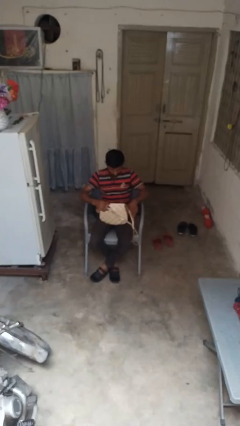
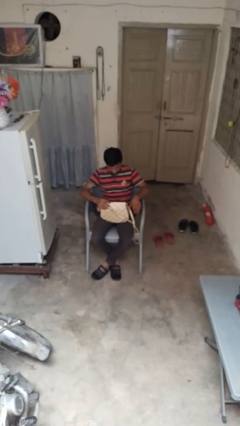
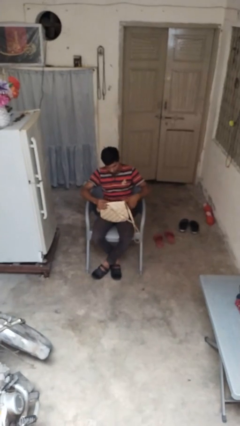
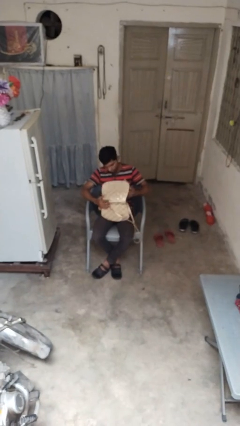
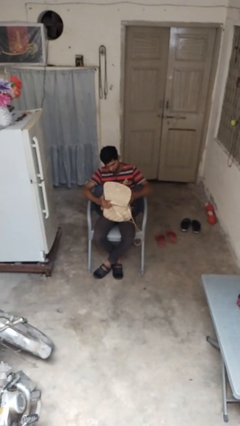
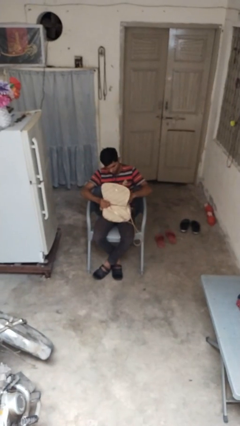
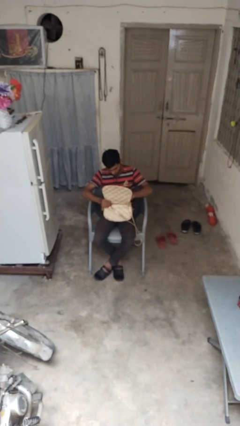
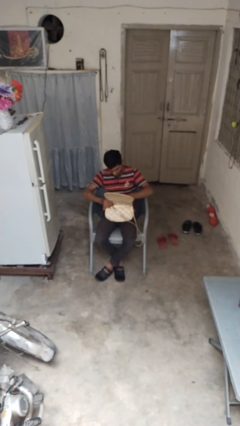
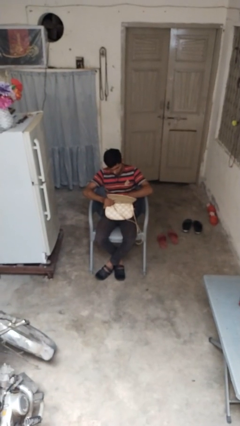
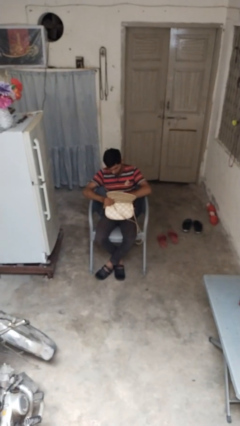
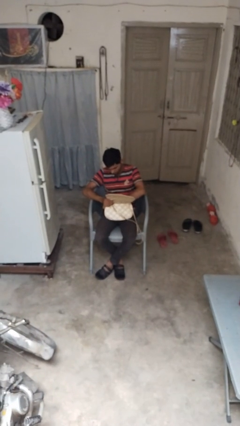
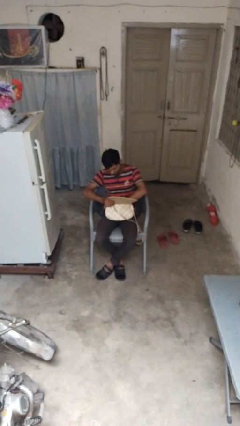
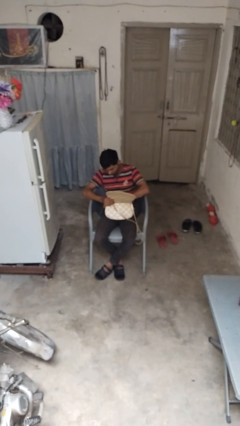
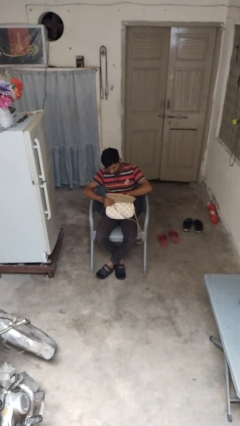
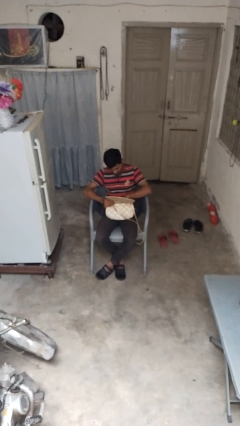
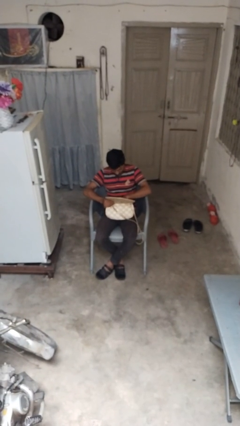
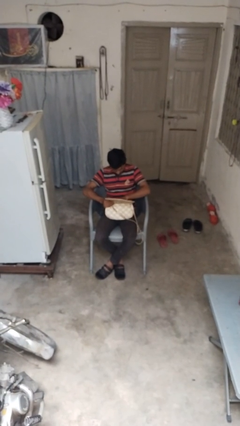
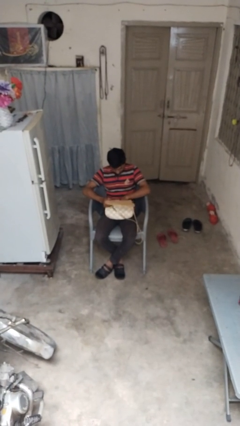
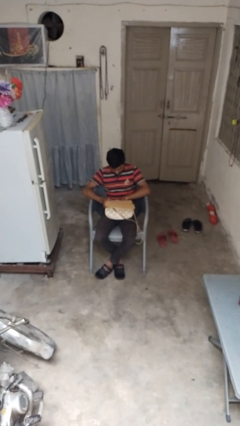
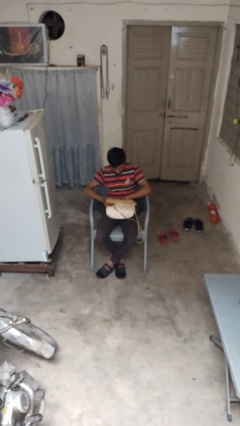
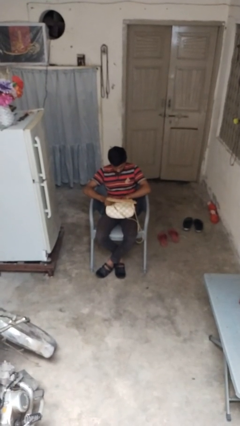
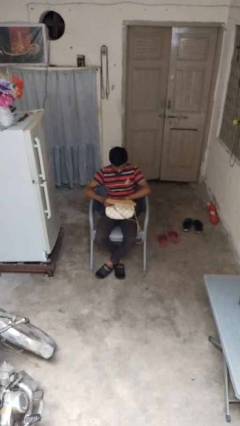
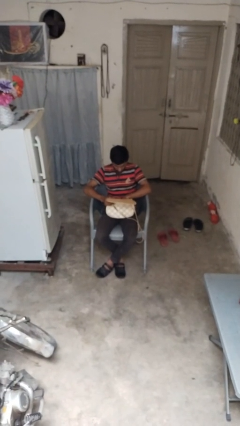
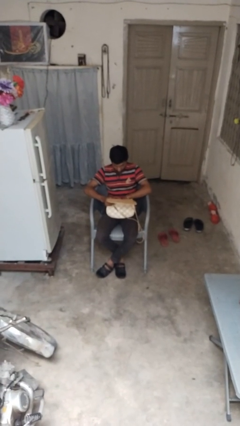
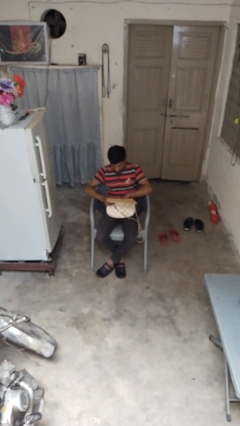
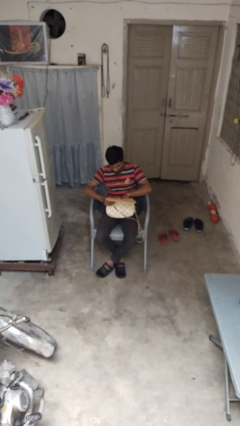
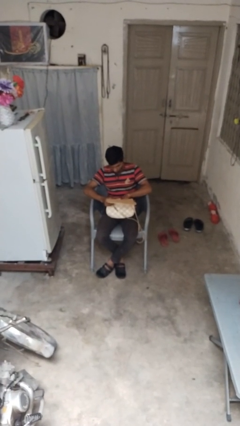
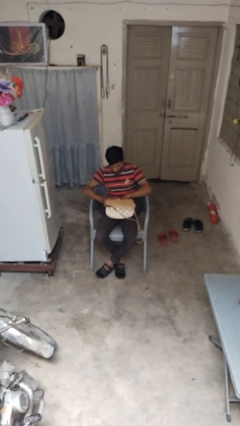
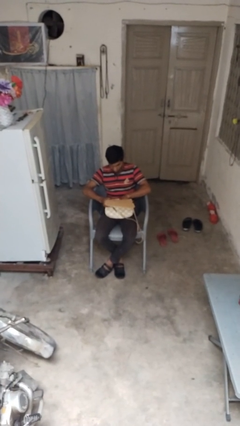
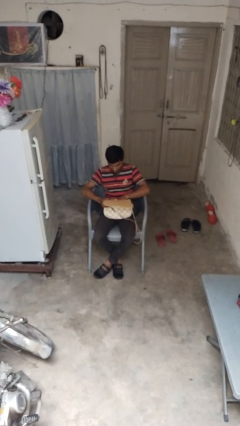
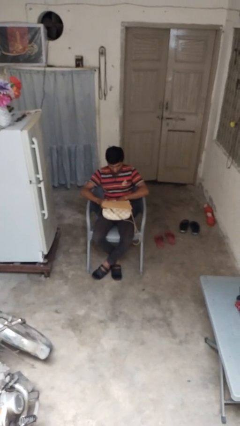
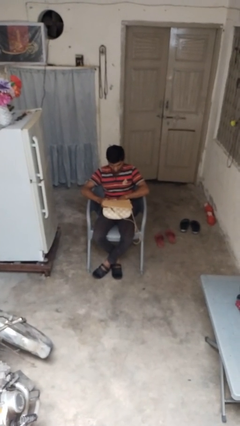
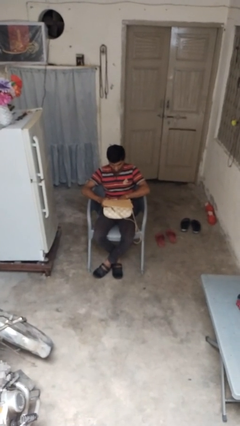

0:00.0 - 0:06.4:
person searches in purse

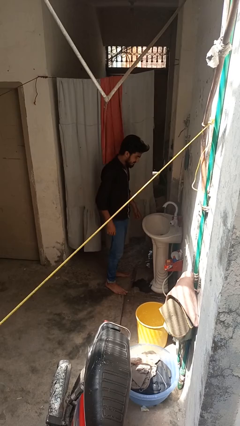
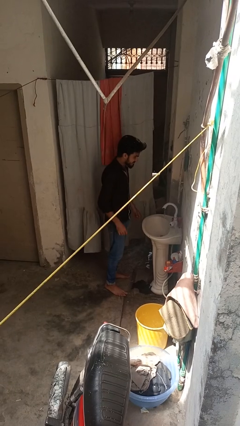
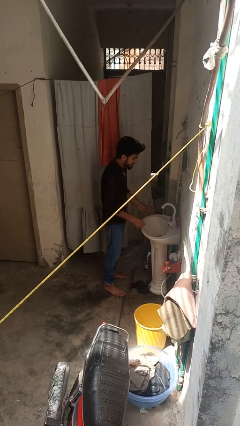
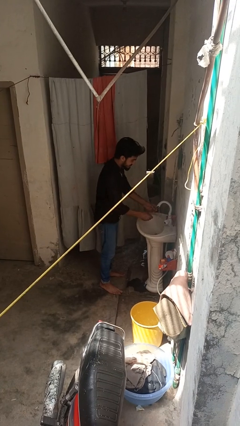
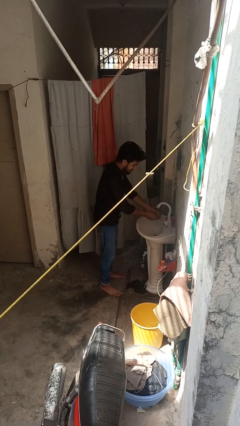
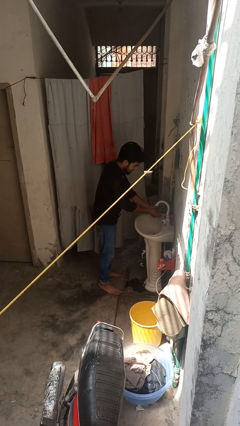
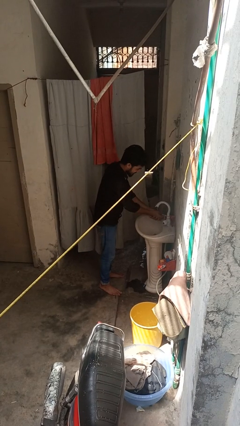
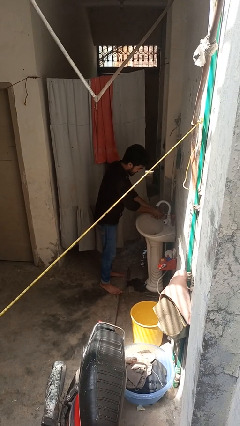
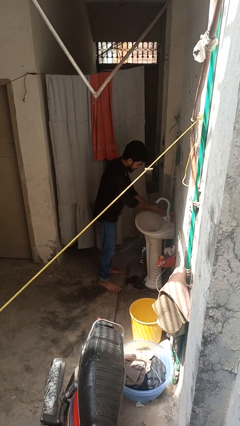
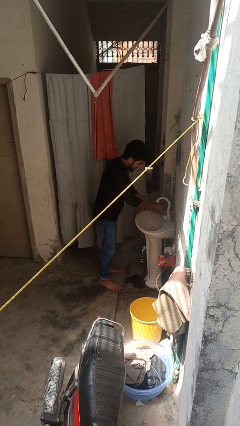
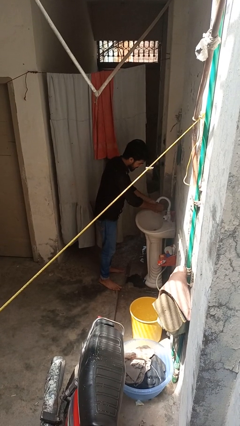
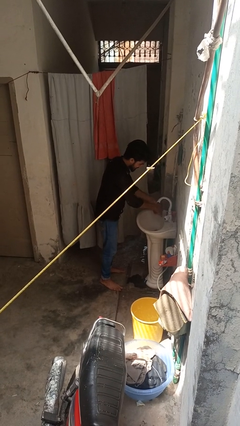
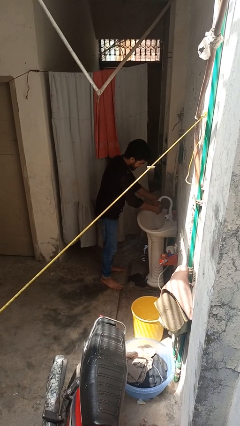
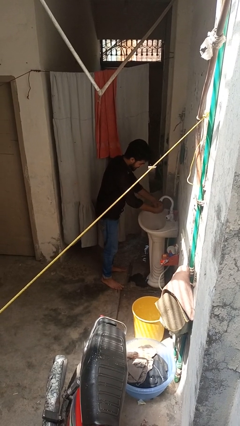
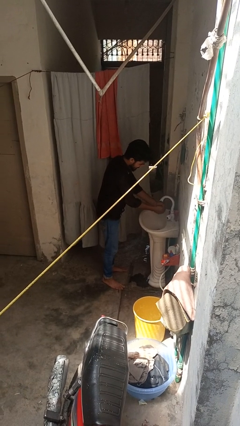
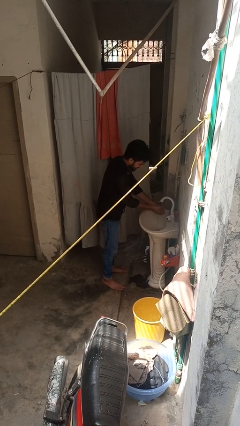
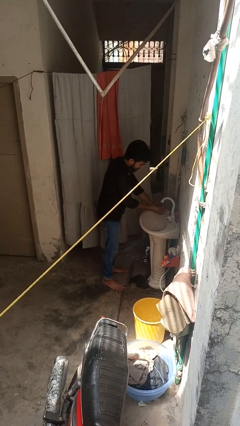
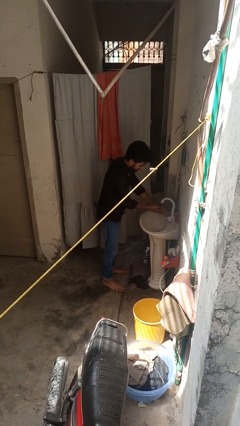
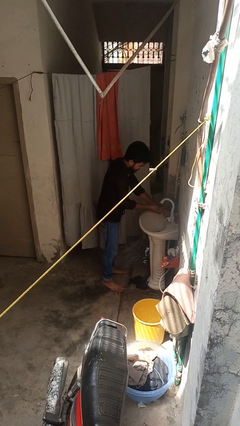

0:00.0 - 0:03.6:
person washes hands

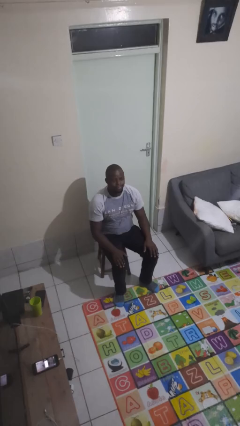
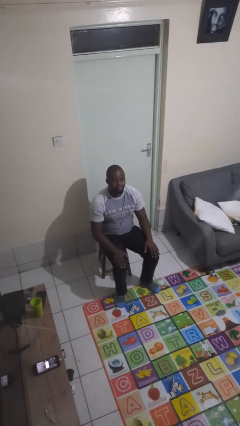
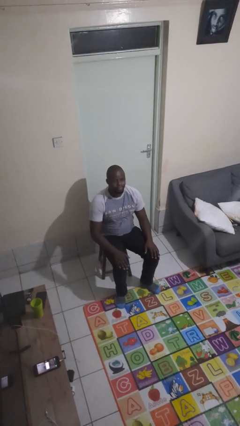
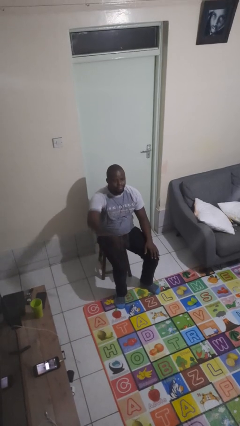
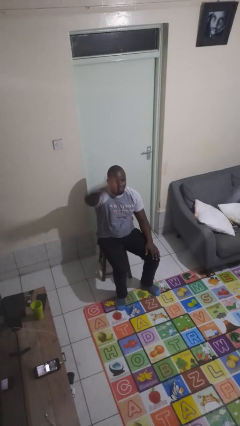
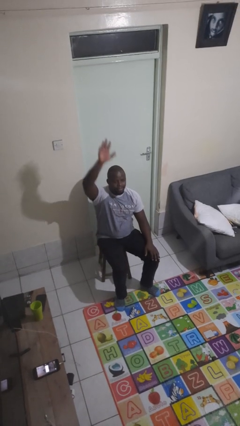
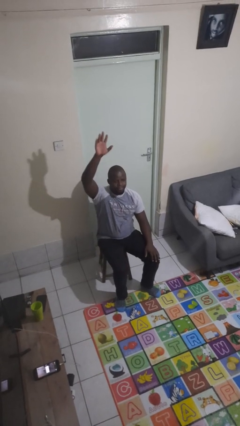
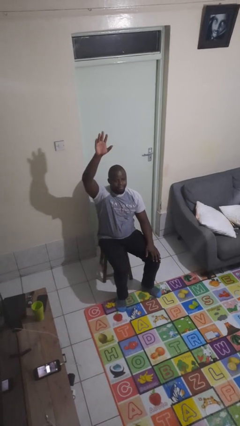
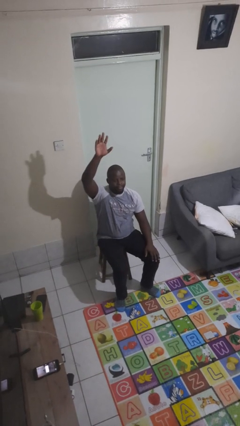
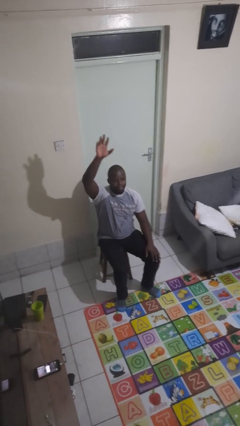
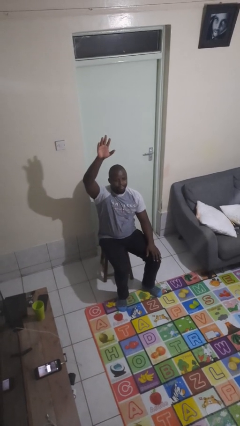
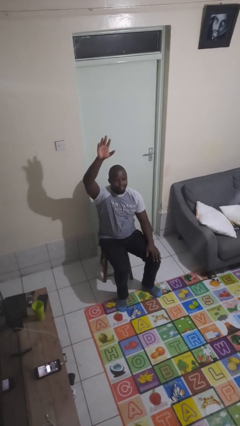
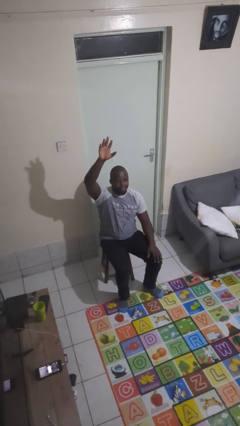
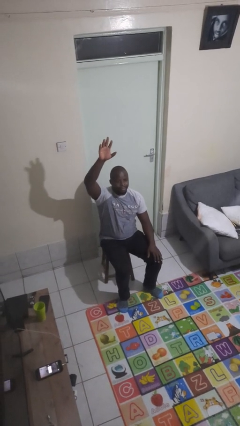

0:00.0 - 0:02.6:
person gestures raise hand

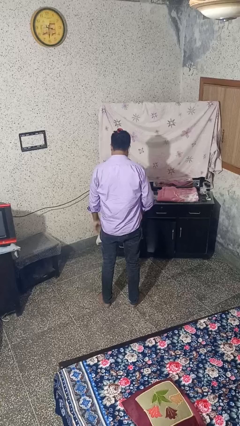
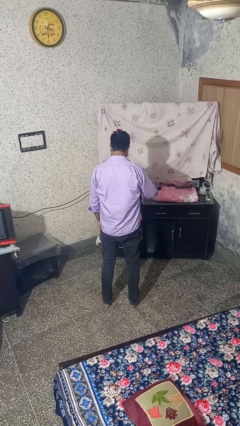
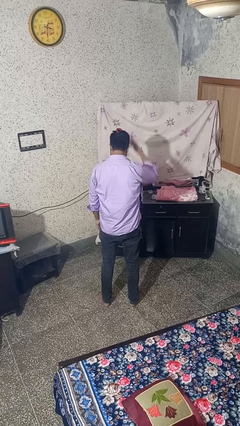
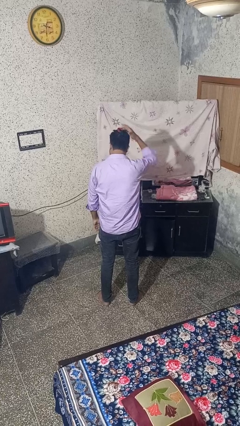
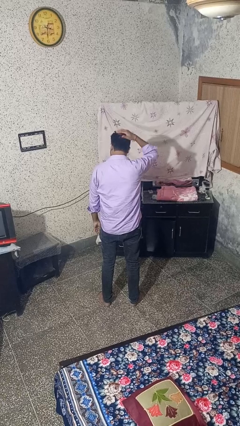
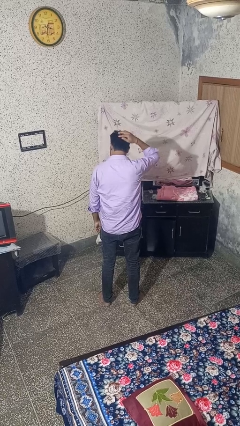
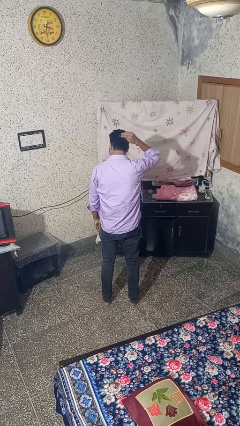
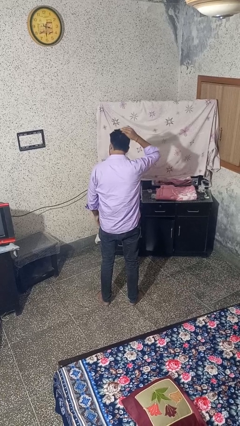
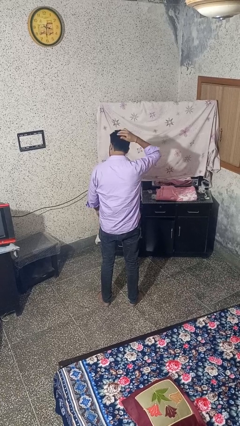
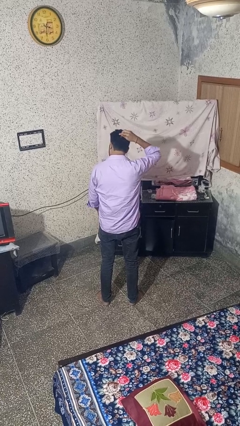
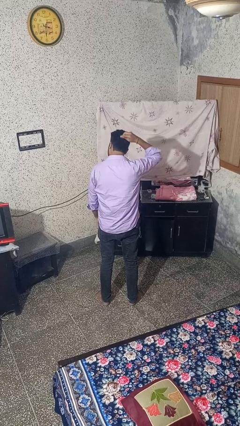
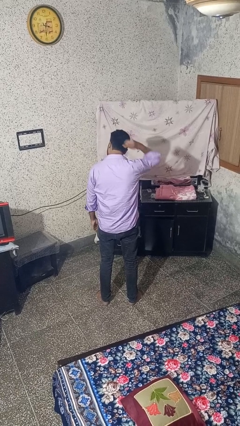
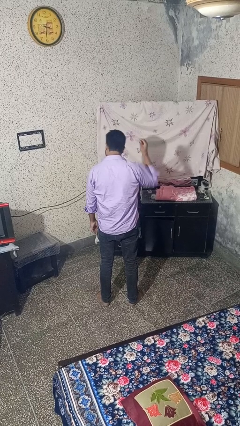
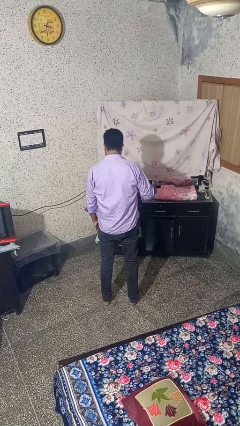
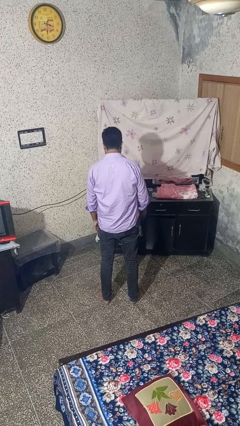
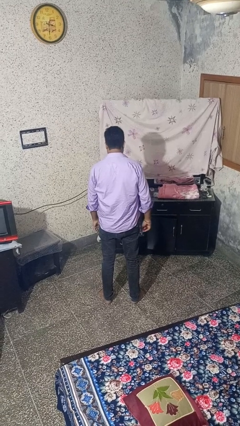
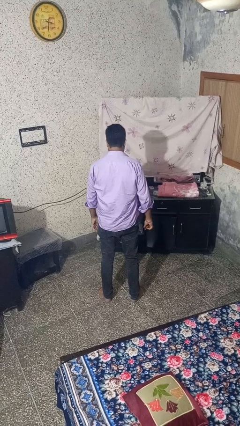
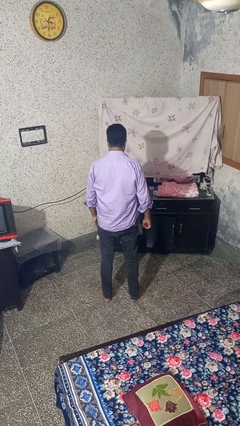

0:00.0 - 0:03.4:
person takes off hairtie

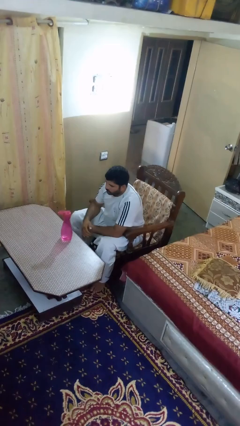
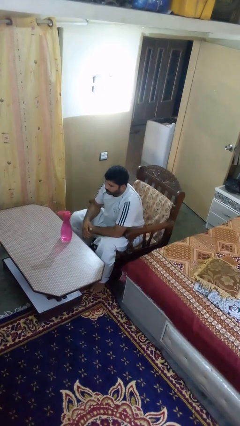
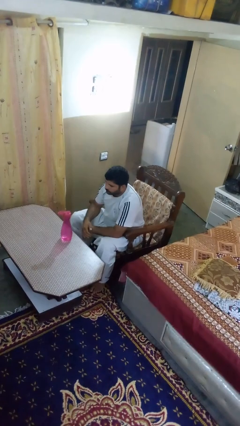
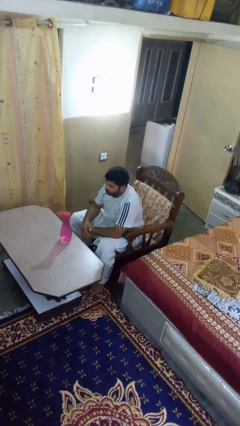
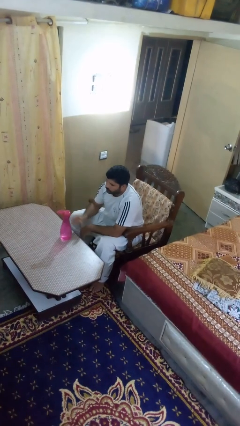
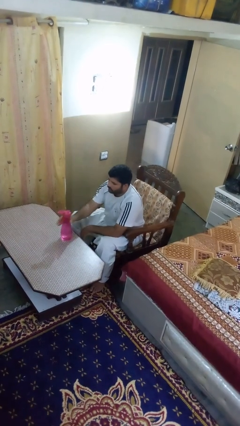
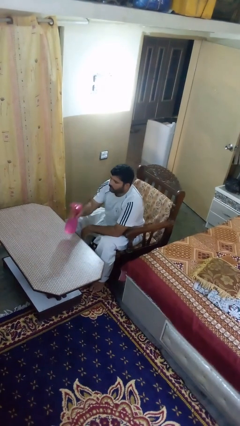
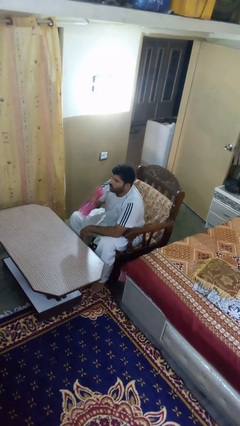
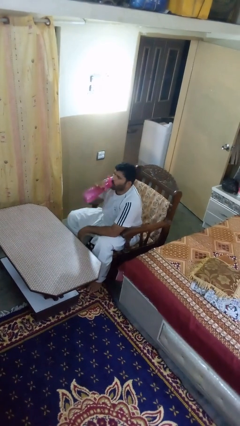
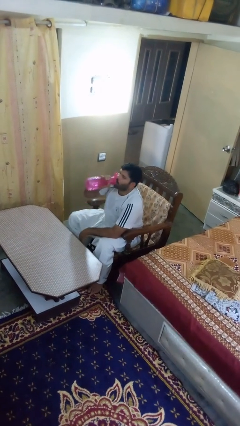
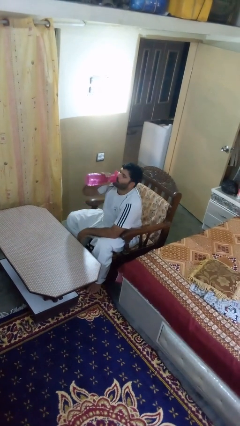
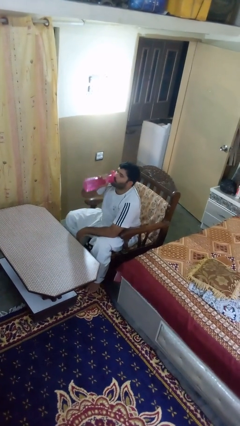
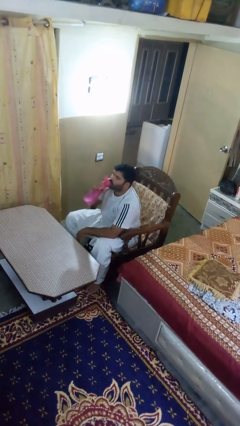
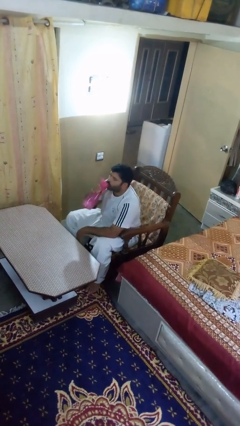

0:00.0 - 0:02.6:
person drinks from bottle
